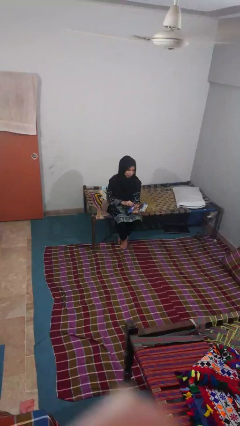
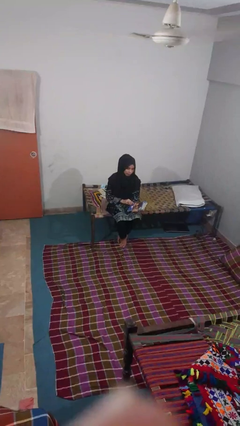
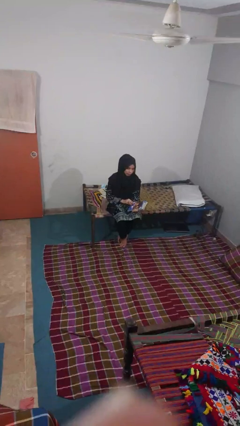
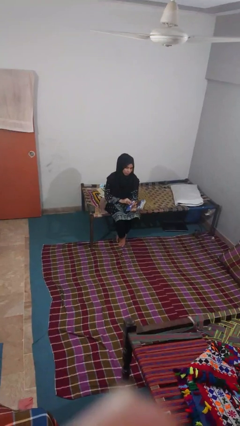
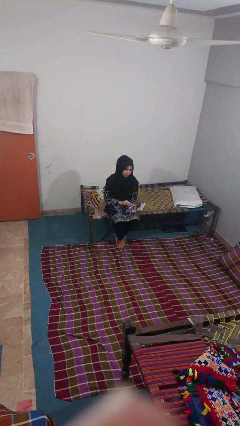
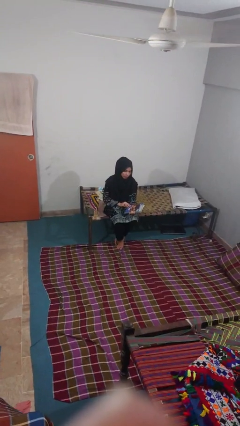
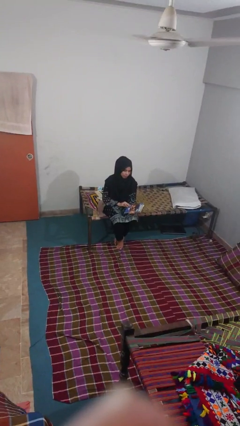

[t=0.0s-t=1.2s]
person reads book

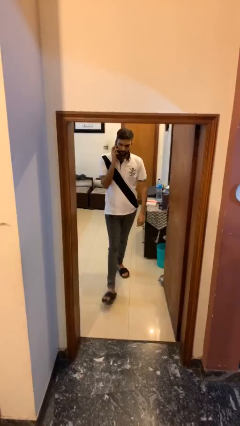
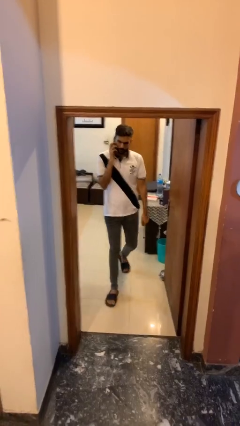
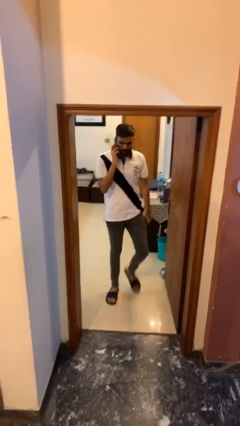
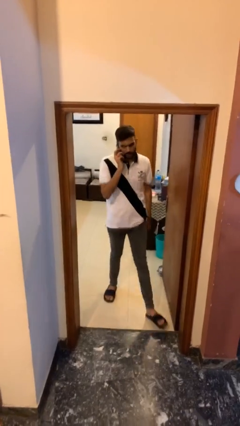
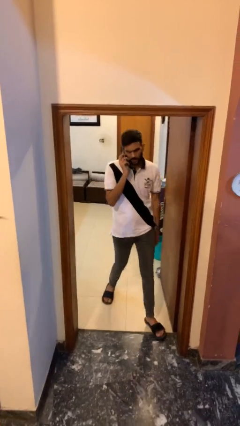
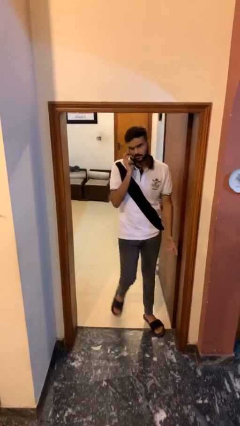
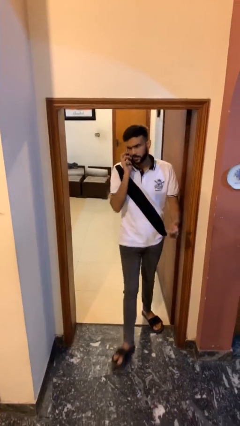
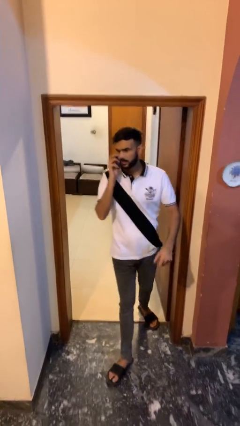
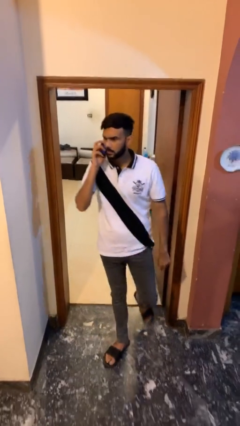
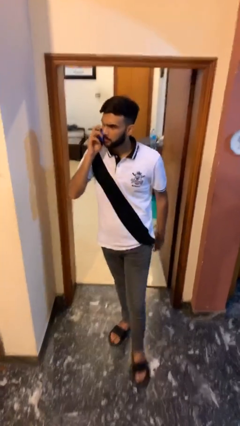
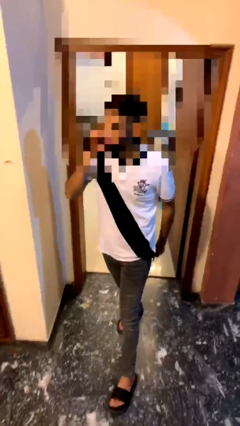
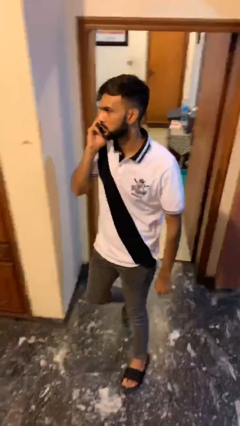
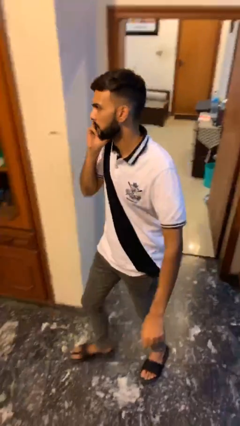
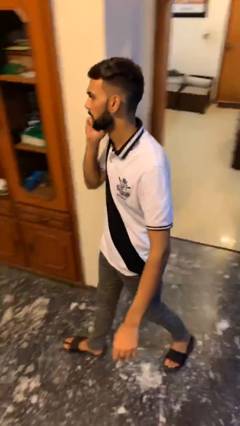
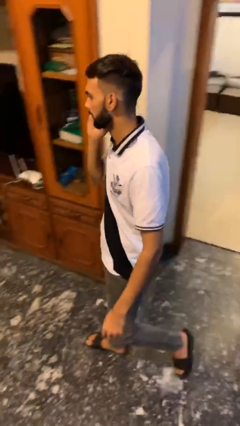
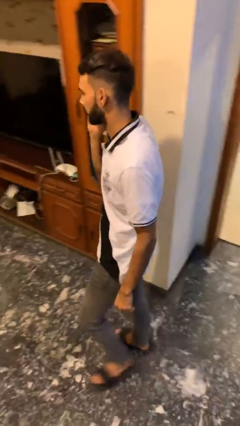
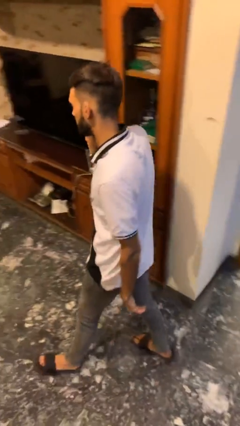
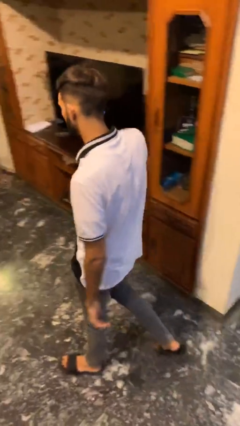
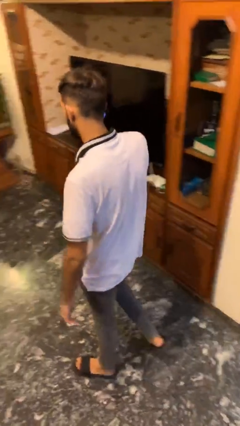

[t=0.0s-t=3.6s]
person enters scene through structure

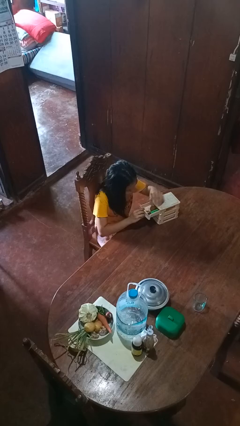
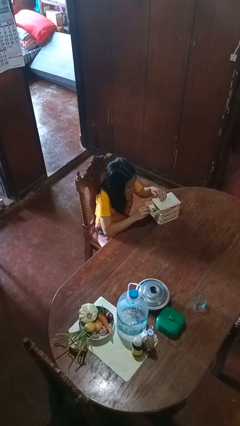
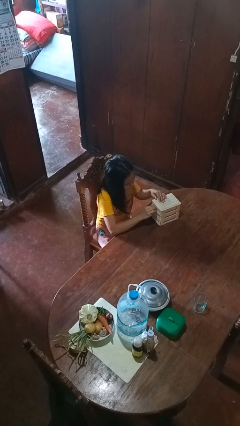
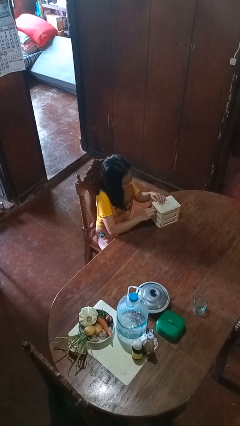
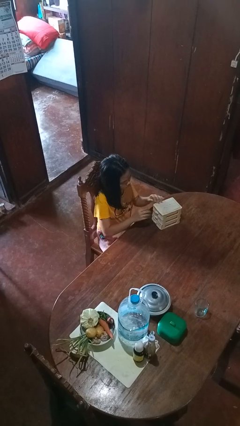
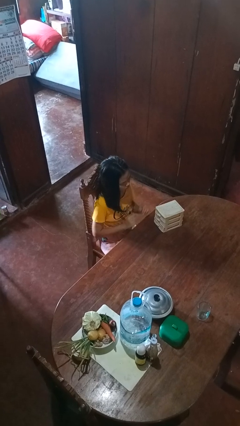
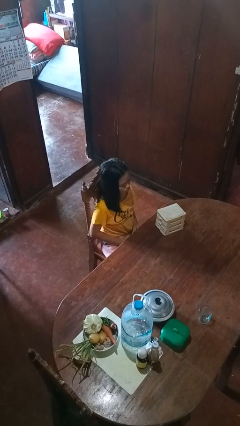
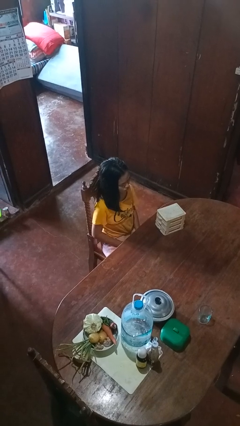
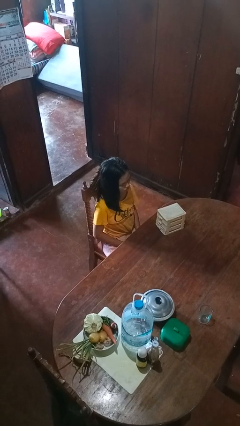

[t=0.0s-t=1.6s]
person closes jewelry box

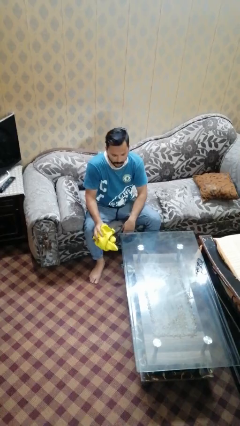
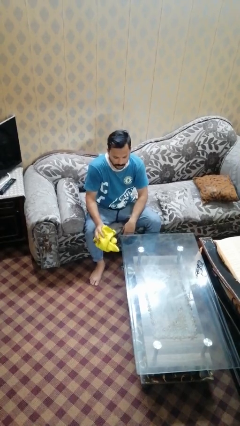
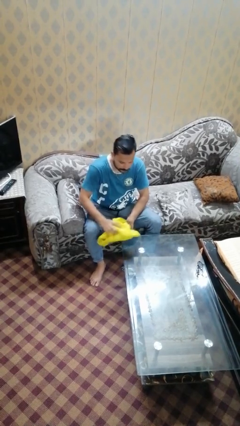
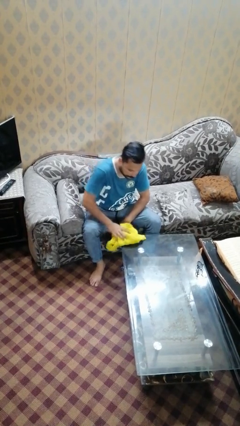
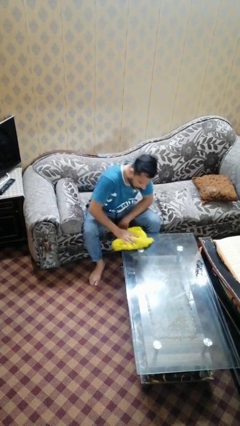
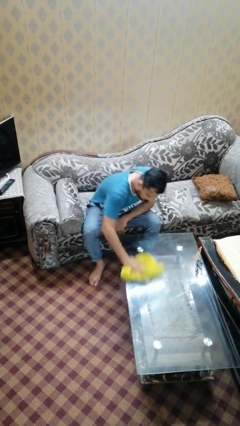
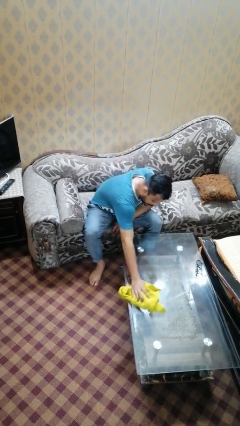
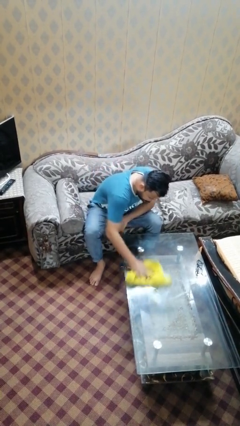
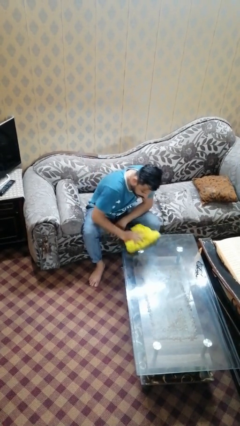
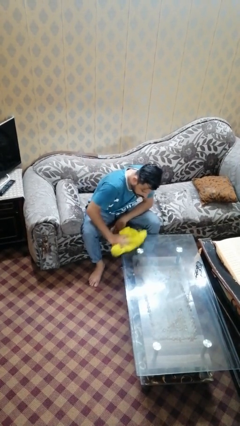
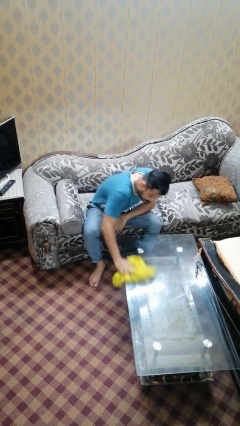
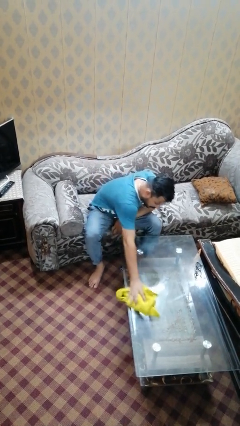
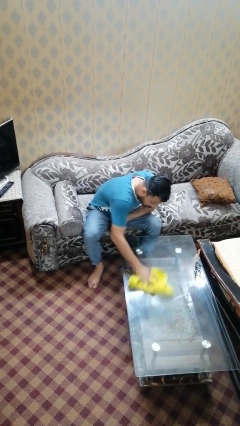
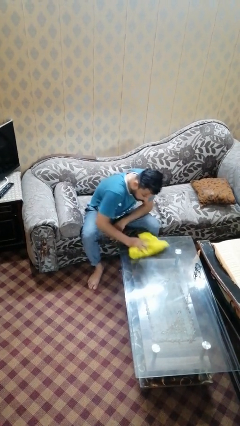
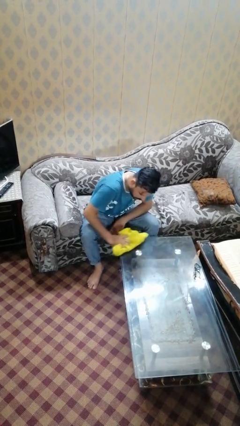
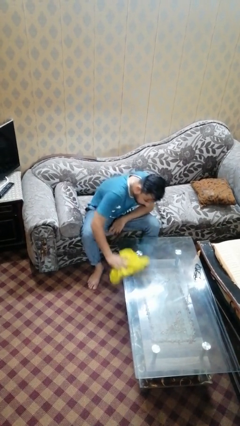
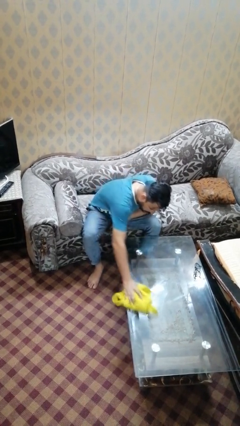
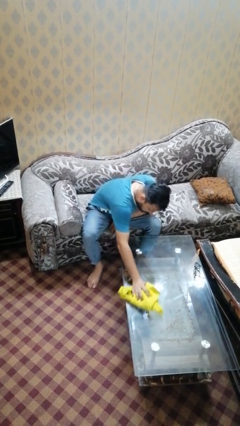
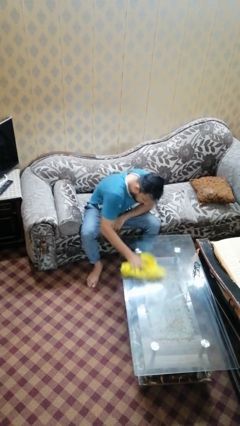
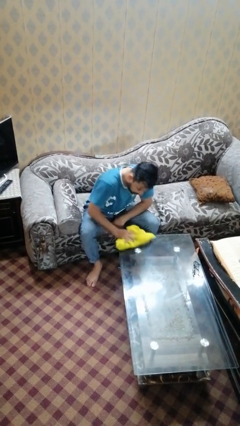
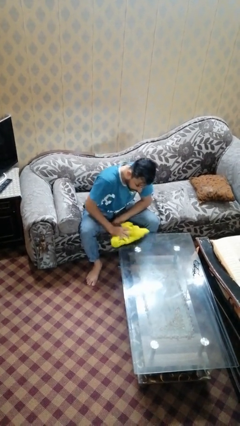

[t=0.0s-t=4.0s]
person cleans table with rag

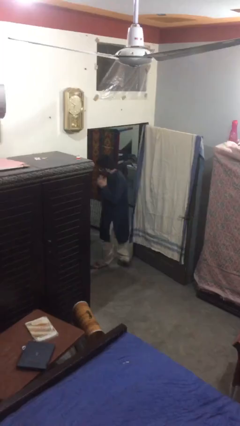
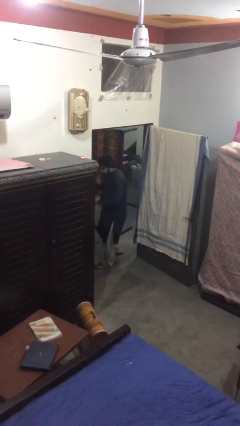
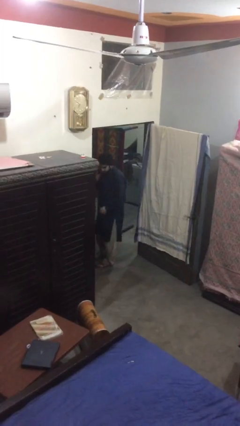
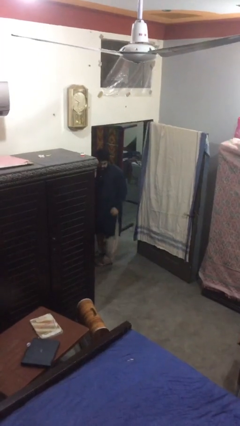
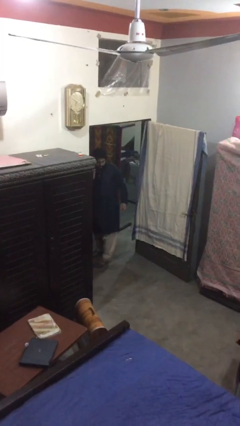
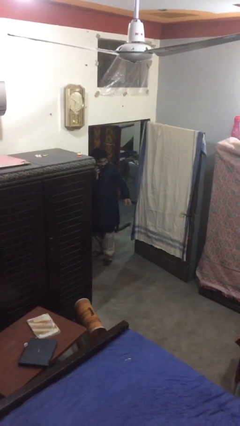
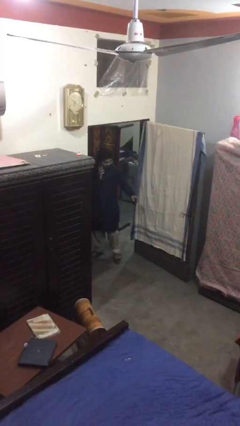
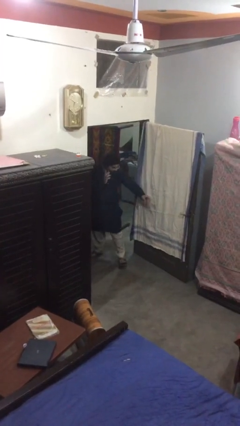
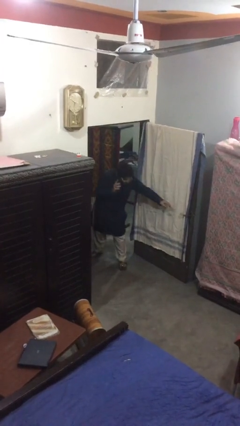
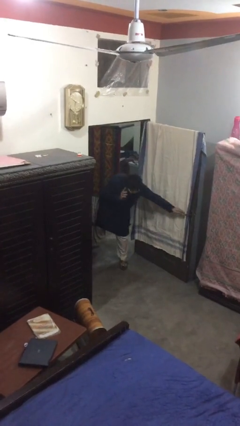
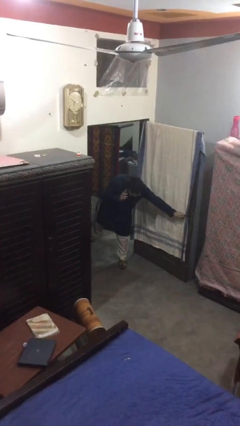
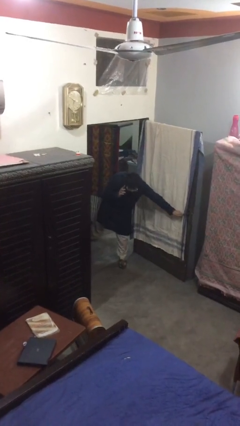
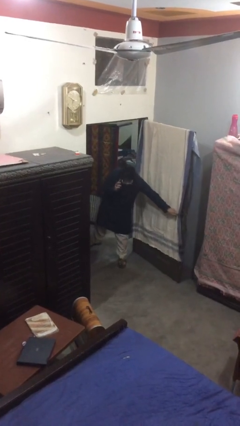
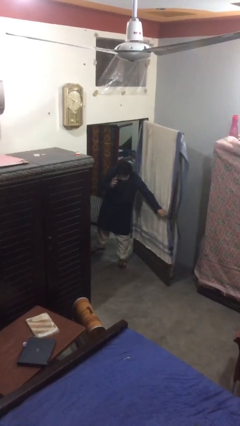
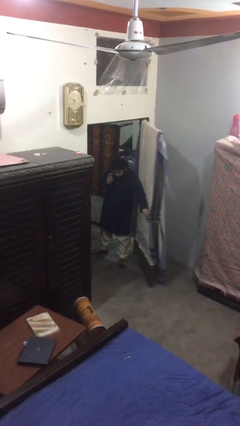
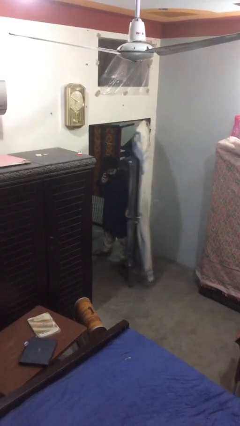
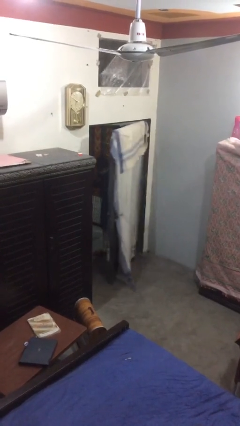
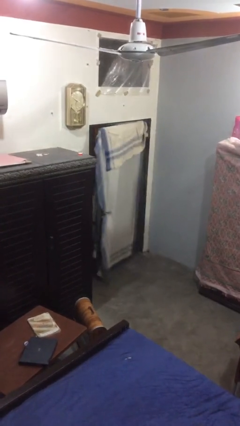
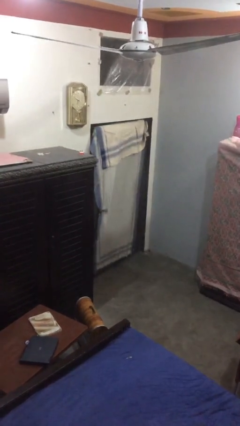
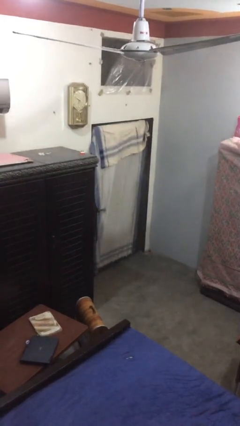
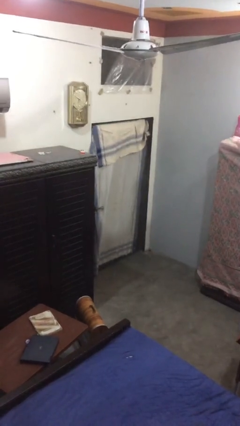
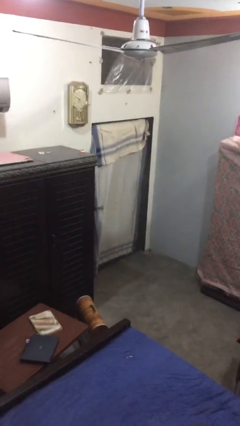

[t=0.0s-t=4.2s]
person closes facility door

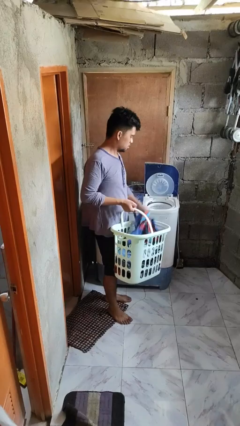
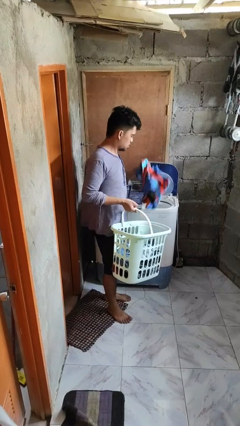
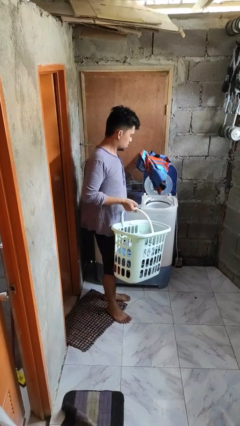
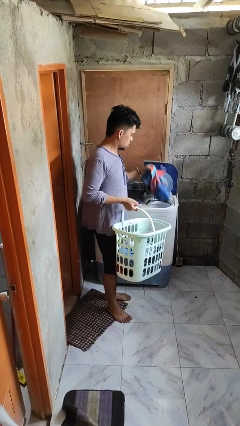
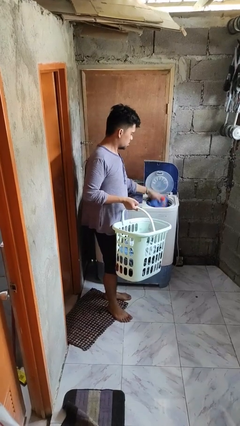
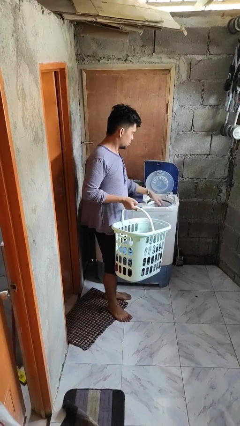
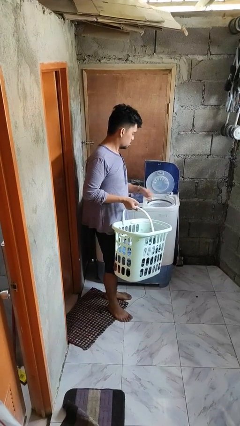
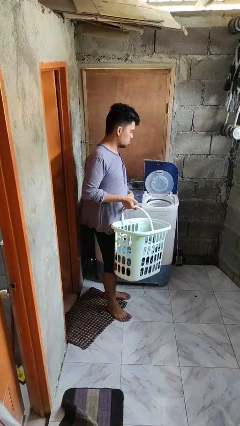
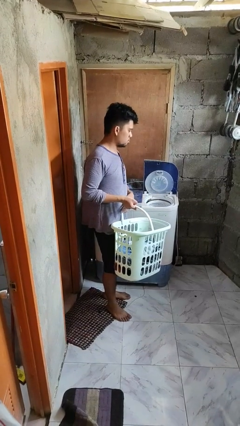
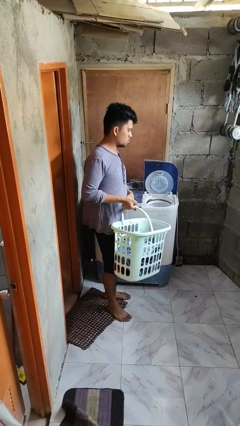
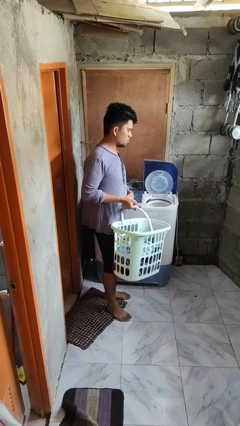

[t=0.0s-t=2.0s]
person loads dryer

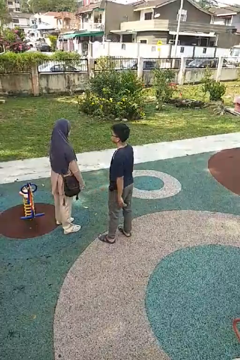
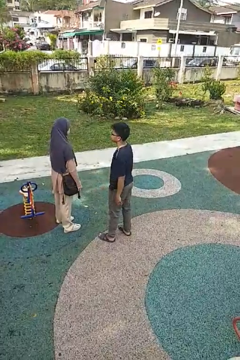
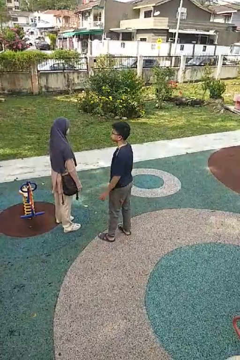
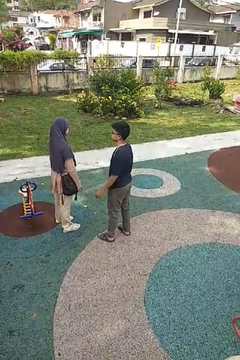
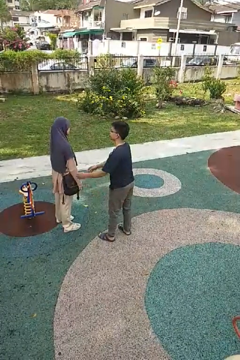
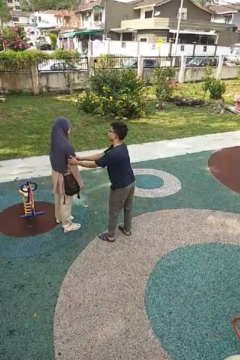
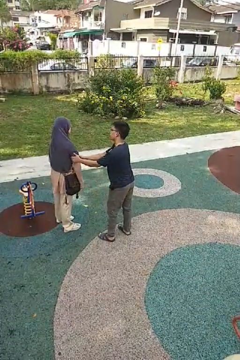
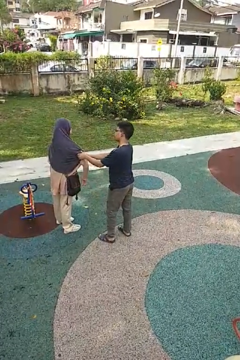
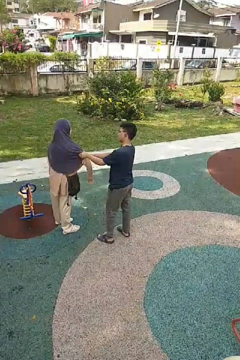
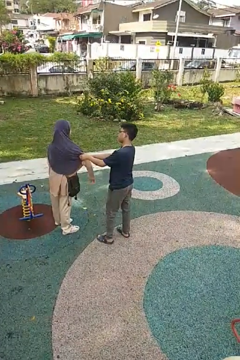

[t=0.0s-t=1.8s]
person grabs person by bicep
